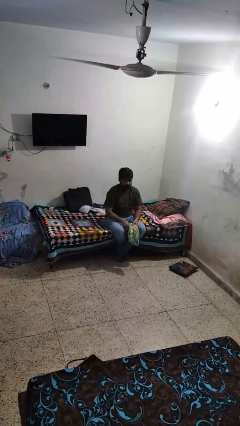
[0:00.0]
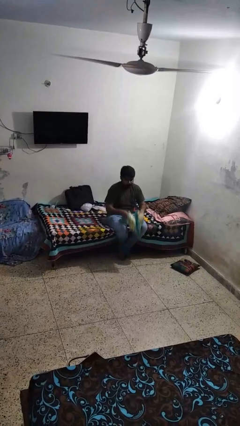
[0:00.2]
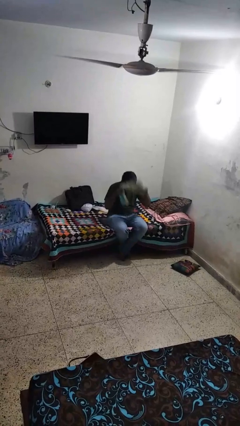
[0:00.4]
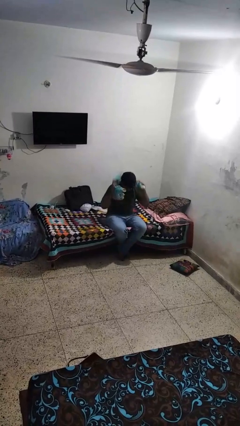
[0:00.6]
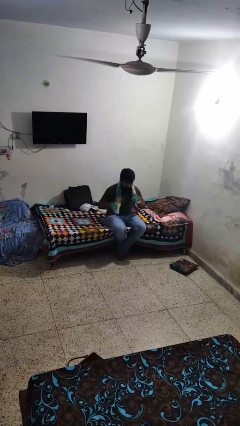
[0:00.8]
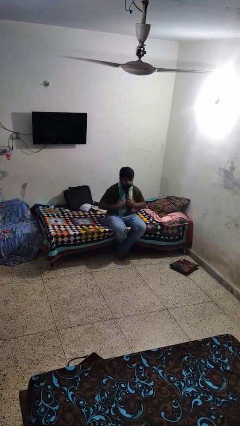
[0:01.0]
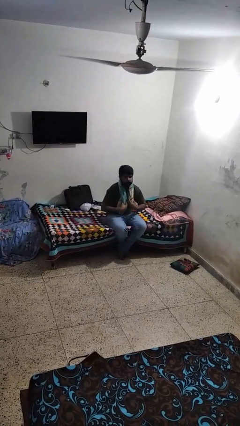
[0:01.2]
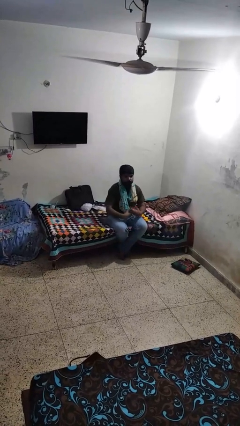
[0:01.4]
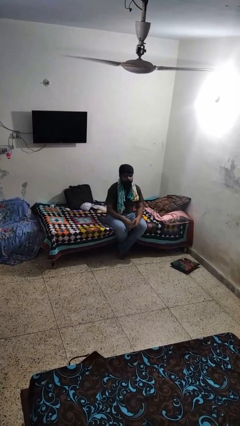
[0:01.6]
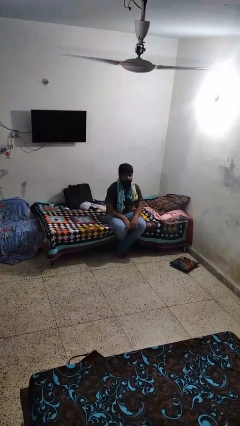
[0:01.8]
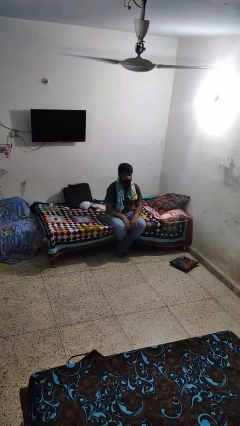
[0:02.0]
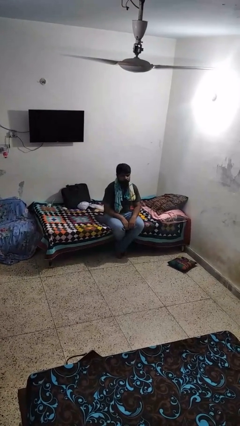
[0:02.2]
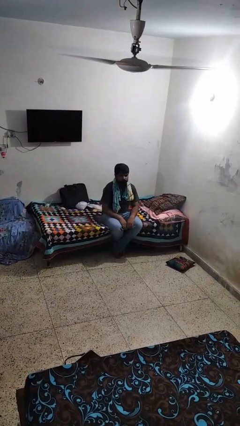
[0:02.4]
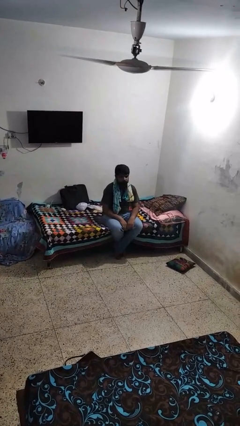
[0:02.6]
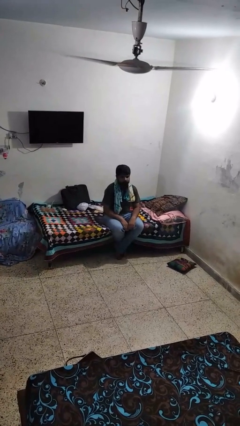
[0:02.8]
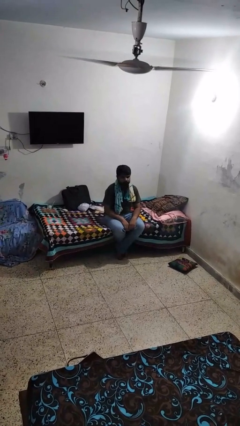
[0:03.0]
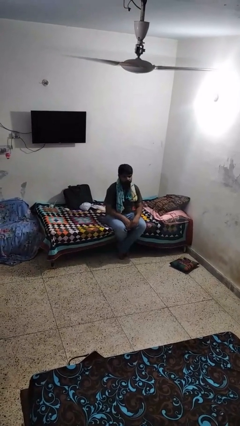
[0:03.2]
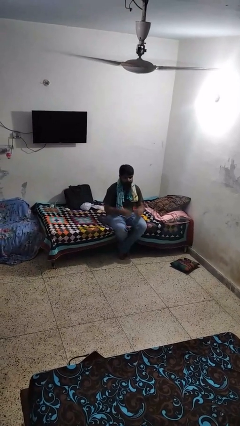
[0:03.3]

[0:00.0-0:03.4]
person puts on scarf

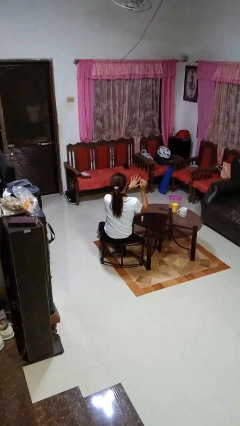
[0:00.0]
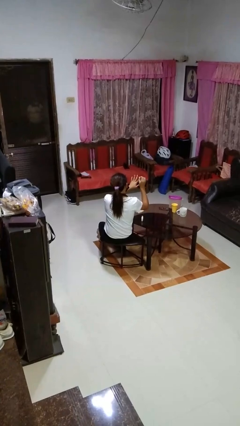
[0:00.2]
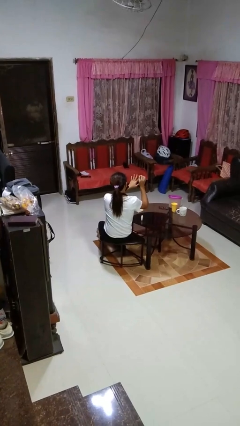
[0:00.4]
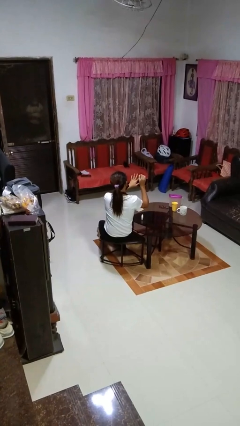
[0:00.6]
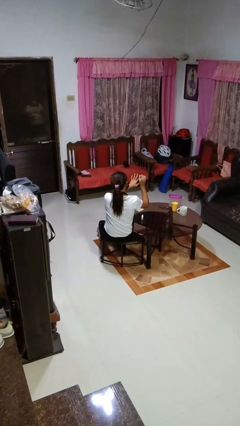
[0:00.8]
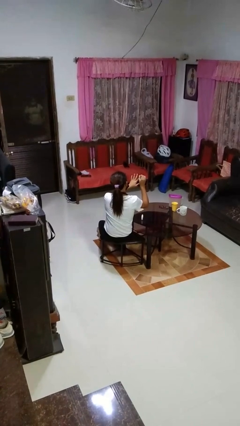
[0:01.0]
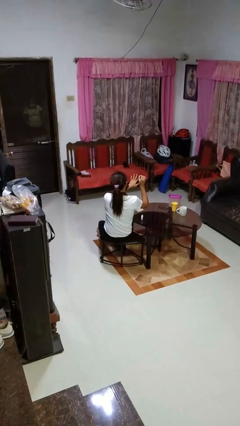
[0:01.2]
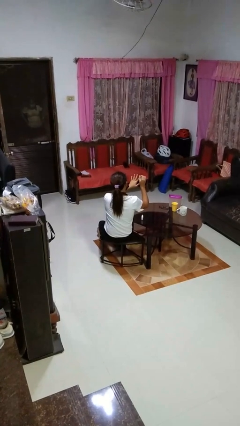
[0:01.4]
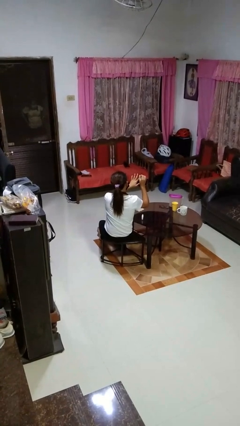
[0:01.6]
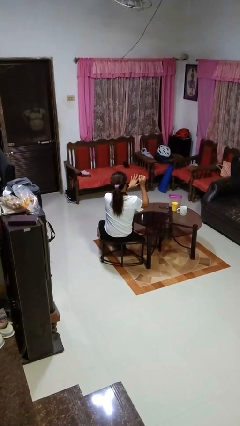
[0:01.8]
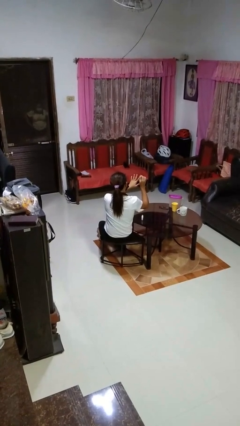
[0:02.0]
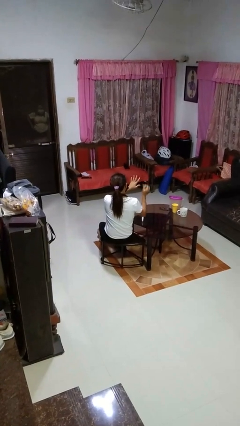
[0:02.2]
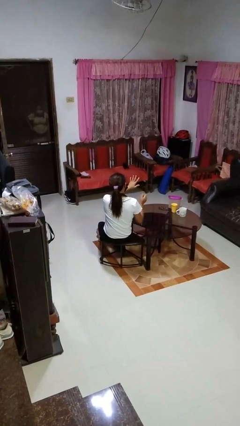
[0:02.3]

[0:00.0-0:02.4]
person paints fingernails

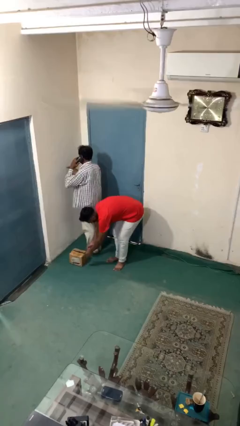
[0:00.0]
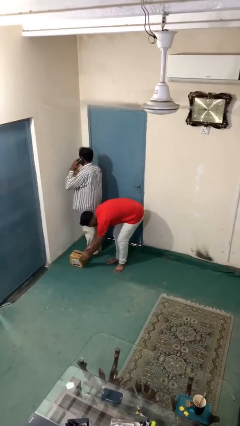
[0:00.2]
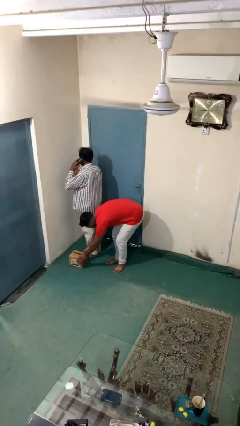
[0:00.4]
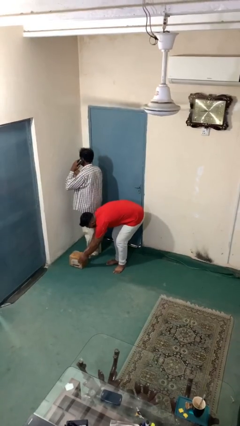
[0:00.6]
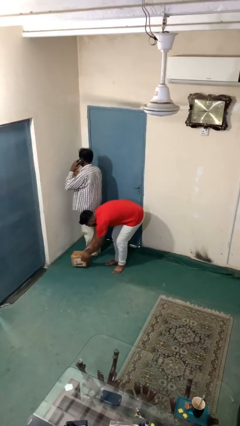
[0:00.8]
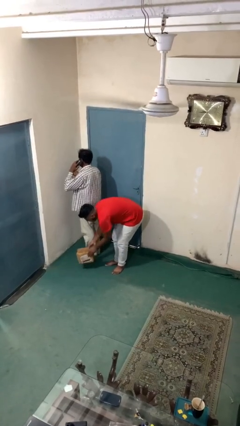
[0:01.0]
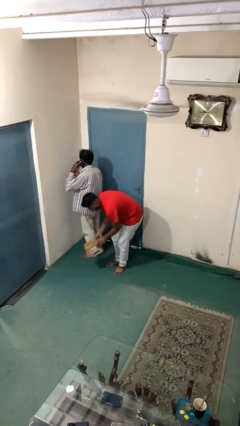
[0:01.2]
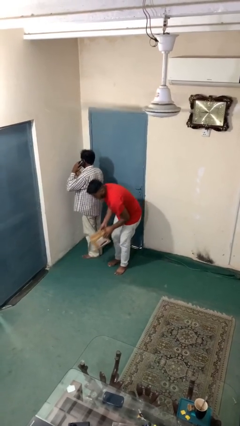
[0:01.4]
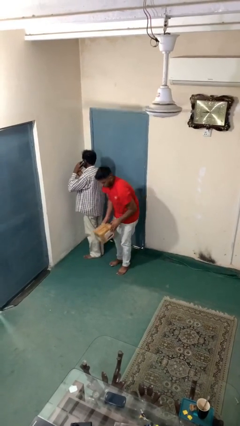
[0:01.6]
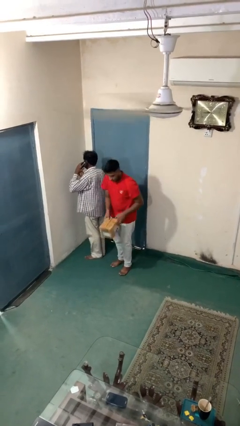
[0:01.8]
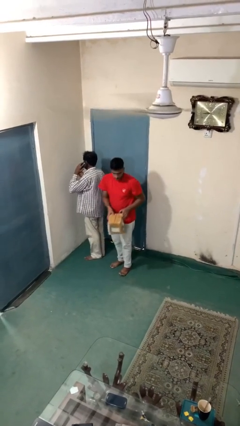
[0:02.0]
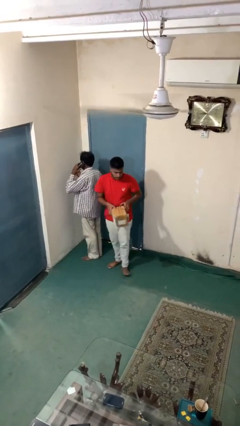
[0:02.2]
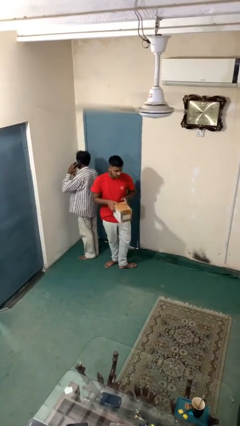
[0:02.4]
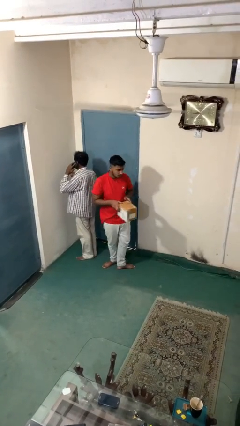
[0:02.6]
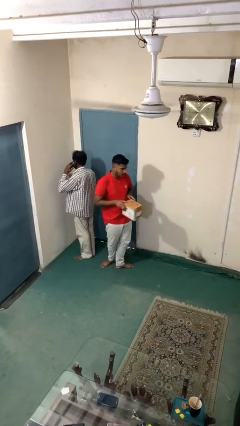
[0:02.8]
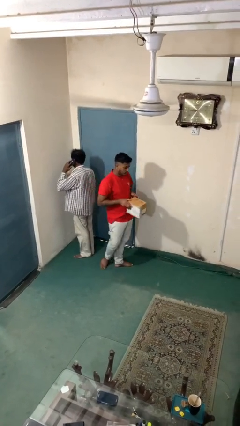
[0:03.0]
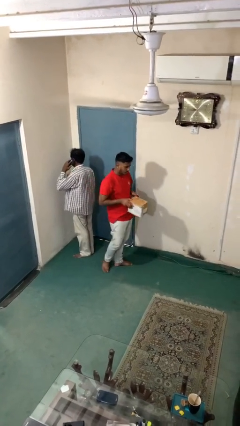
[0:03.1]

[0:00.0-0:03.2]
person steals object from person

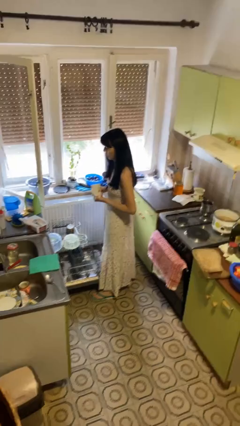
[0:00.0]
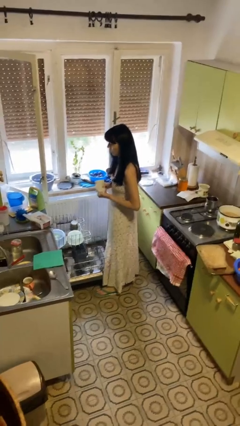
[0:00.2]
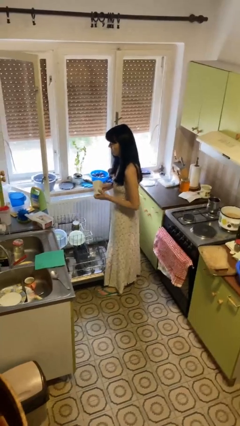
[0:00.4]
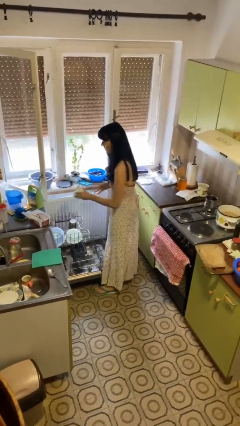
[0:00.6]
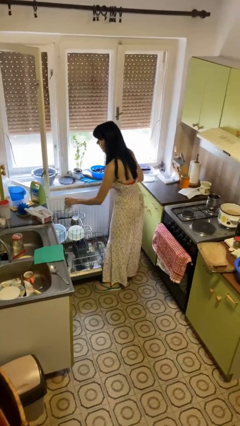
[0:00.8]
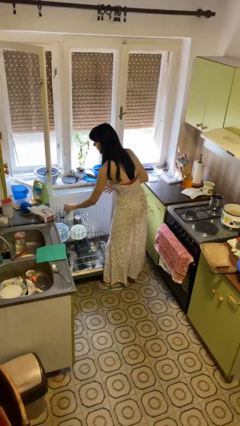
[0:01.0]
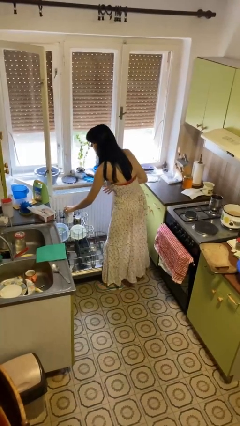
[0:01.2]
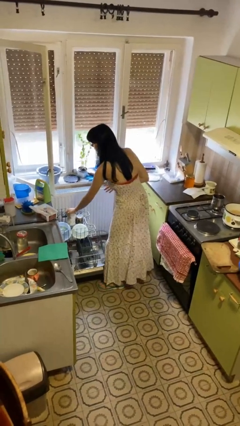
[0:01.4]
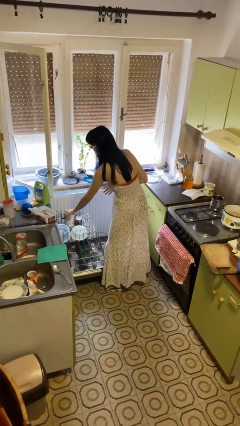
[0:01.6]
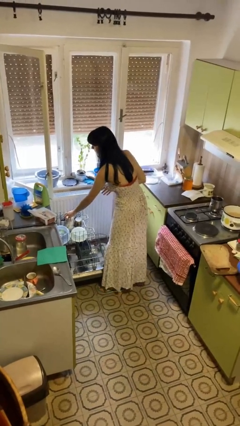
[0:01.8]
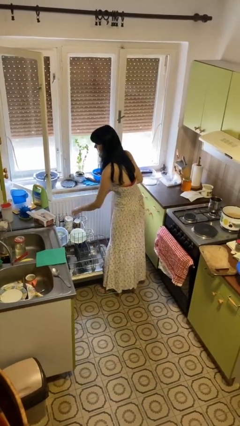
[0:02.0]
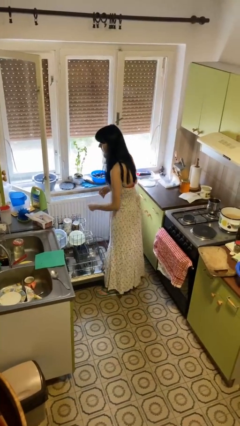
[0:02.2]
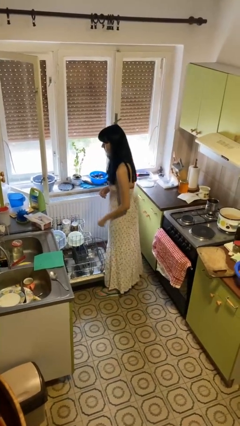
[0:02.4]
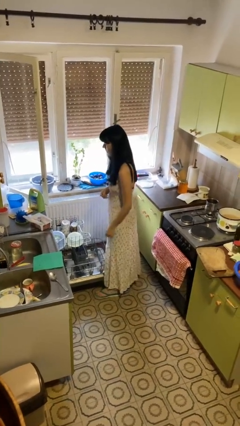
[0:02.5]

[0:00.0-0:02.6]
person loads dishwasher

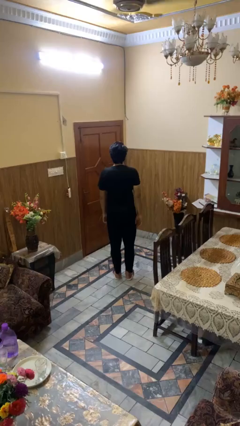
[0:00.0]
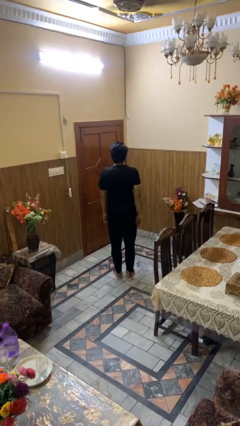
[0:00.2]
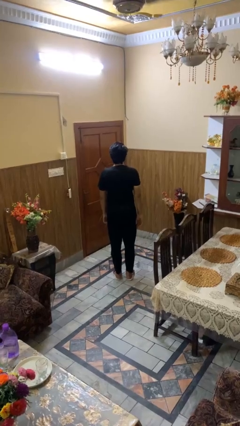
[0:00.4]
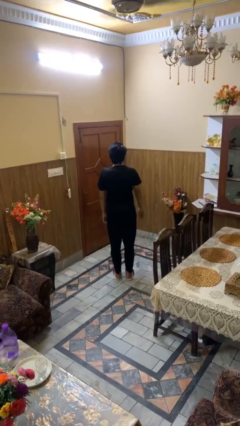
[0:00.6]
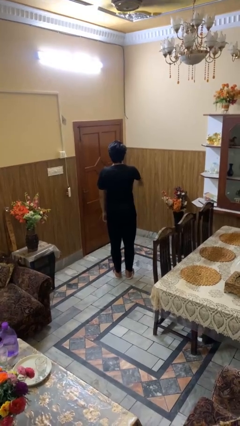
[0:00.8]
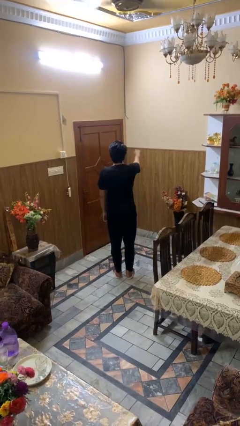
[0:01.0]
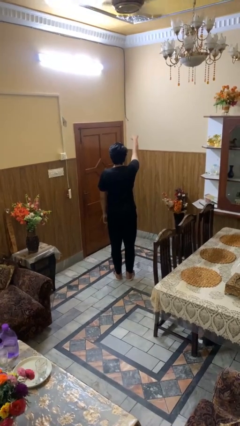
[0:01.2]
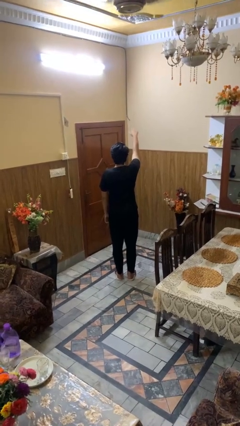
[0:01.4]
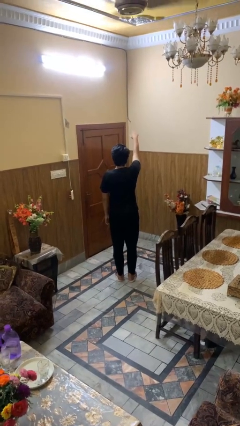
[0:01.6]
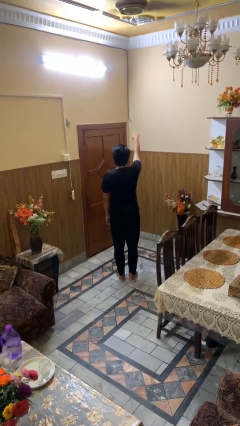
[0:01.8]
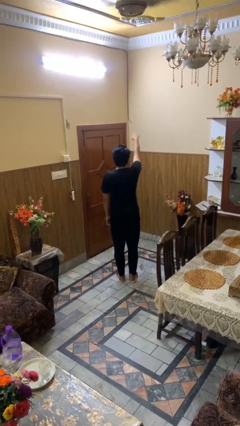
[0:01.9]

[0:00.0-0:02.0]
person gestures swipe up

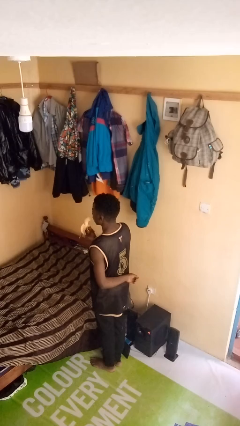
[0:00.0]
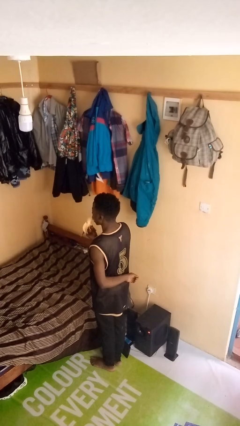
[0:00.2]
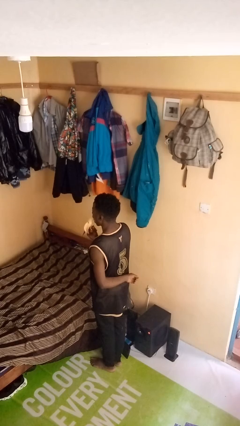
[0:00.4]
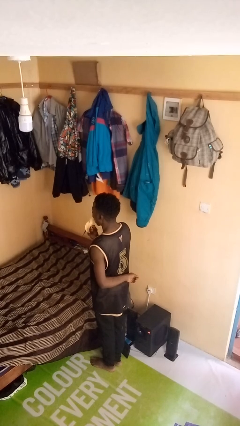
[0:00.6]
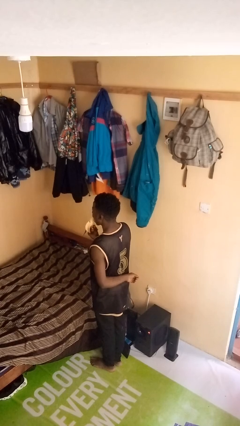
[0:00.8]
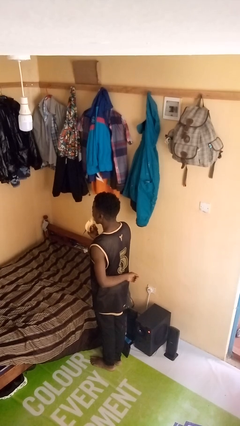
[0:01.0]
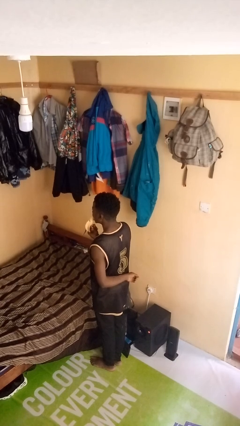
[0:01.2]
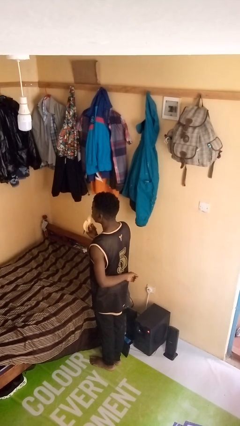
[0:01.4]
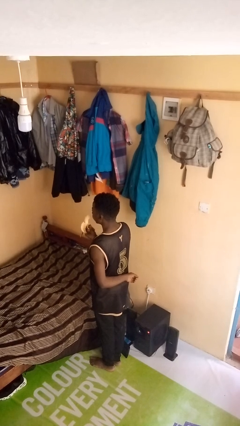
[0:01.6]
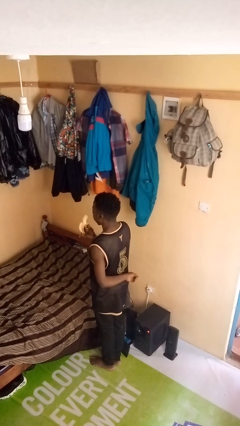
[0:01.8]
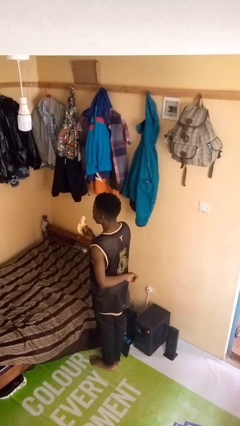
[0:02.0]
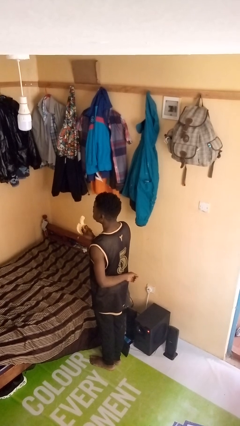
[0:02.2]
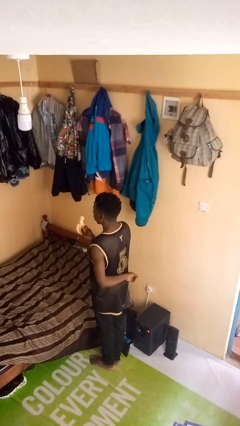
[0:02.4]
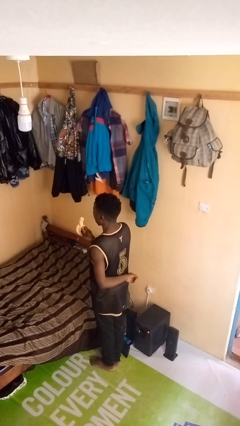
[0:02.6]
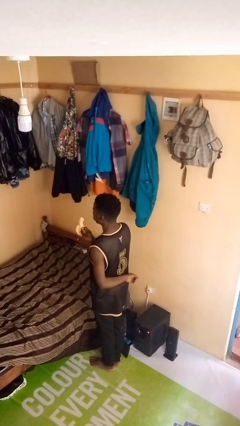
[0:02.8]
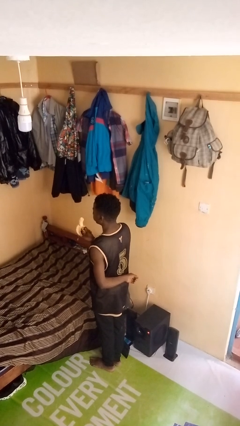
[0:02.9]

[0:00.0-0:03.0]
person eats banana

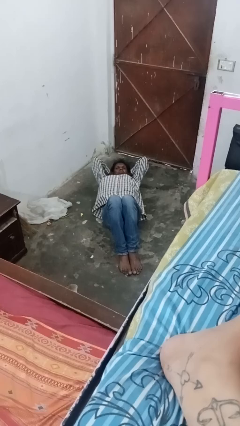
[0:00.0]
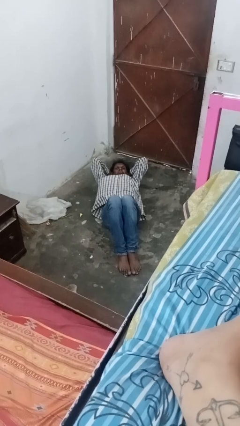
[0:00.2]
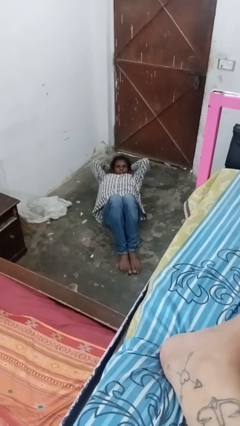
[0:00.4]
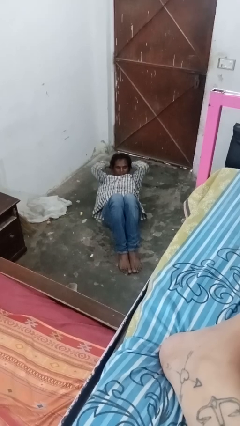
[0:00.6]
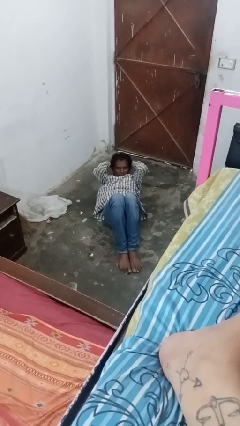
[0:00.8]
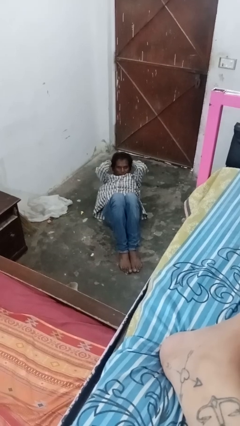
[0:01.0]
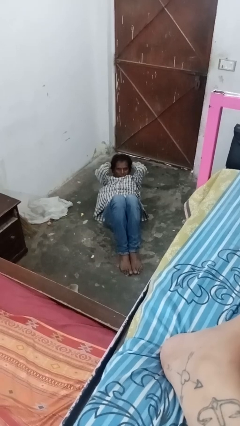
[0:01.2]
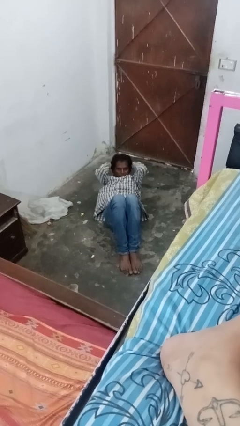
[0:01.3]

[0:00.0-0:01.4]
person exercises with situp
